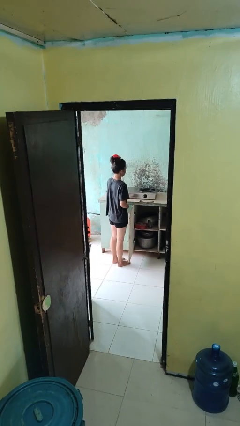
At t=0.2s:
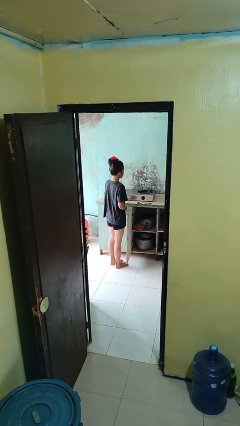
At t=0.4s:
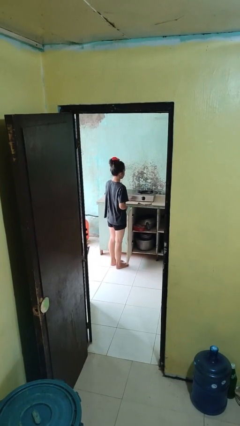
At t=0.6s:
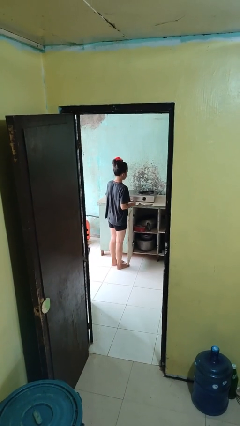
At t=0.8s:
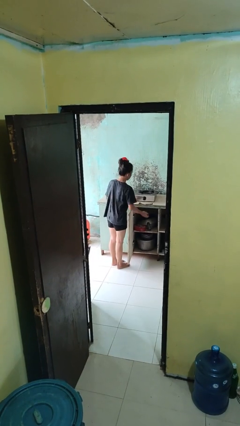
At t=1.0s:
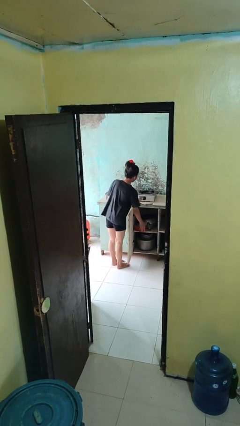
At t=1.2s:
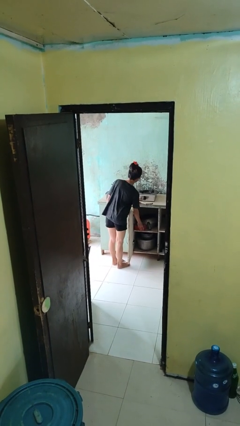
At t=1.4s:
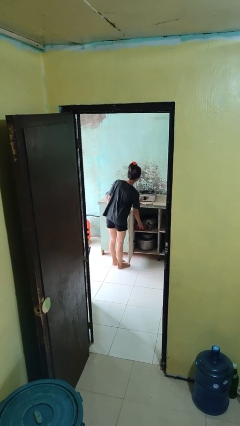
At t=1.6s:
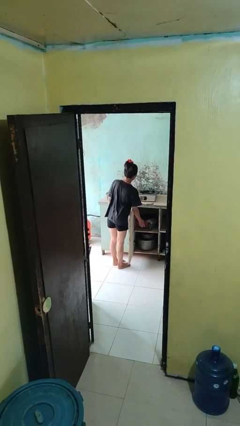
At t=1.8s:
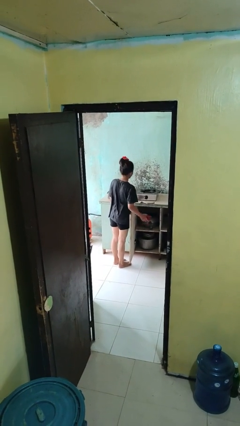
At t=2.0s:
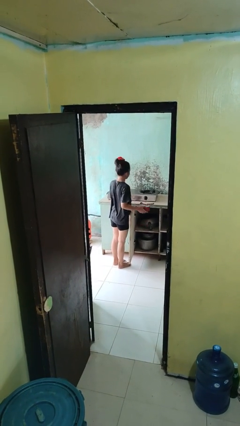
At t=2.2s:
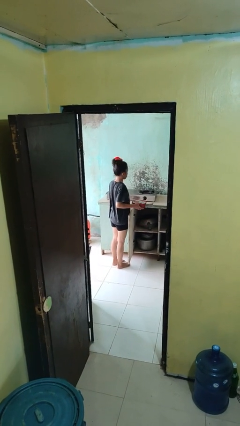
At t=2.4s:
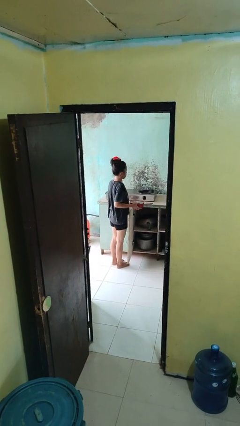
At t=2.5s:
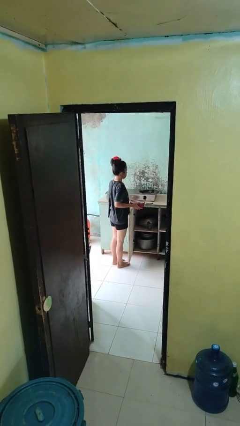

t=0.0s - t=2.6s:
person takes object from cabinet

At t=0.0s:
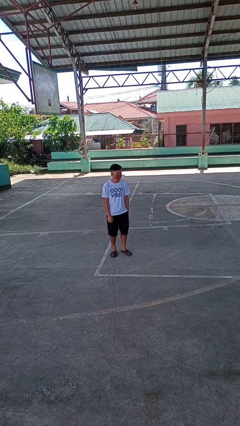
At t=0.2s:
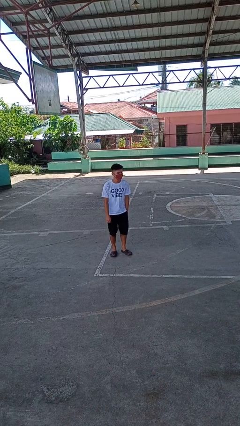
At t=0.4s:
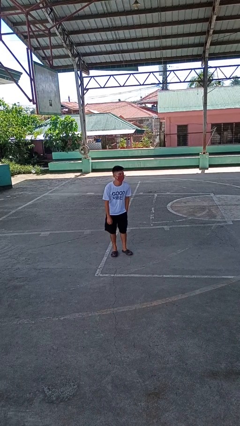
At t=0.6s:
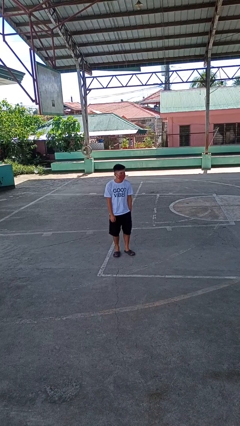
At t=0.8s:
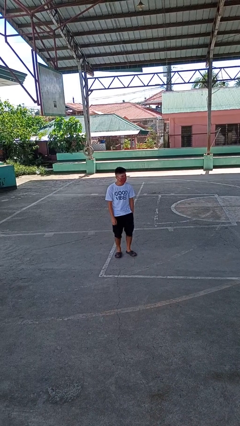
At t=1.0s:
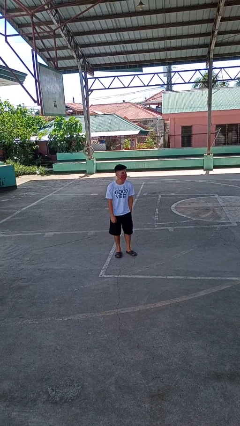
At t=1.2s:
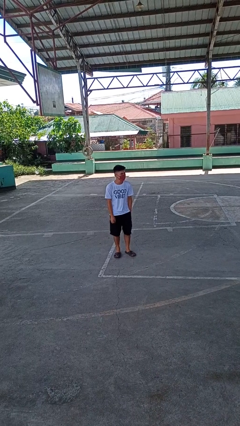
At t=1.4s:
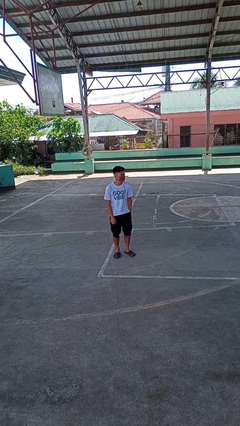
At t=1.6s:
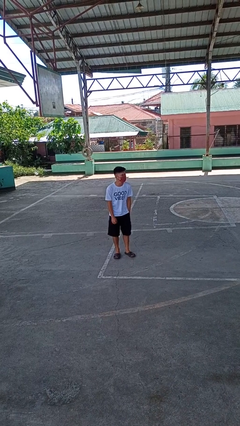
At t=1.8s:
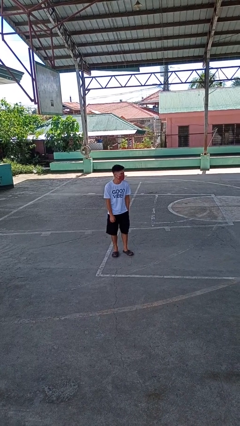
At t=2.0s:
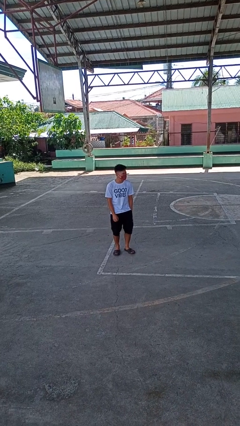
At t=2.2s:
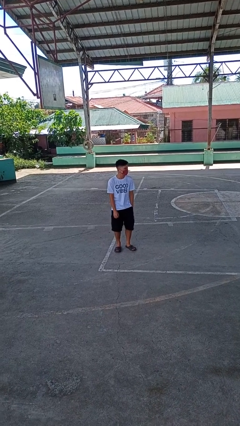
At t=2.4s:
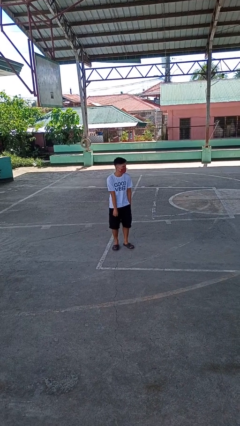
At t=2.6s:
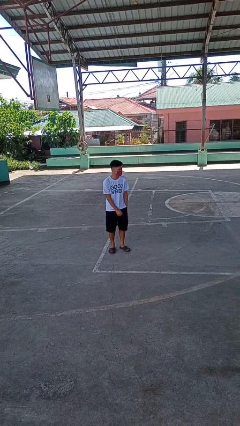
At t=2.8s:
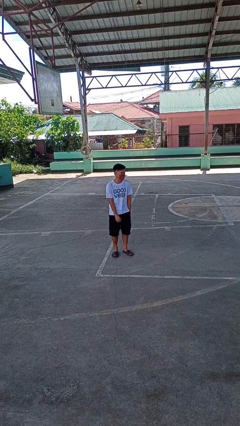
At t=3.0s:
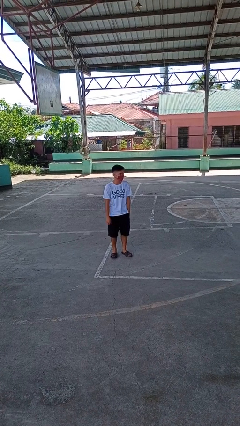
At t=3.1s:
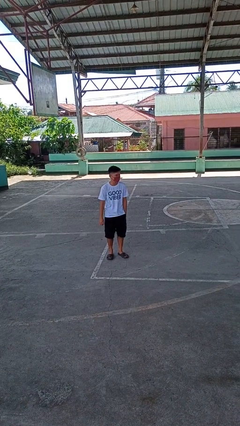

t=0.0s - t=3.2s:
person wiggles hips

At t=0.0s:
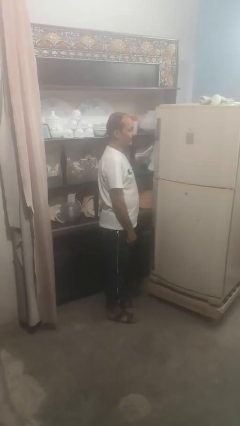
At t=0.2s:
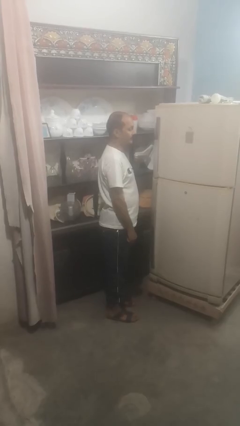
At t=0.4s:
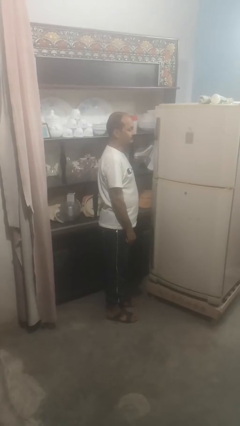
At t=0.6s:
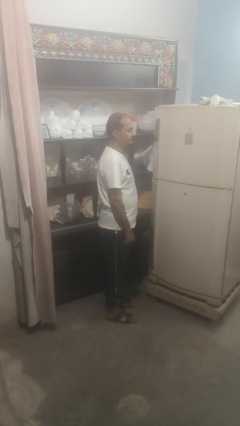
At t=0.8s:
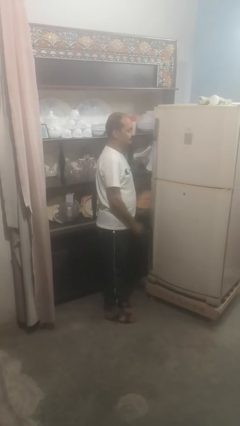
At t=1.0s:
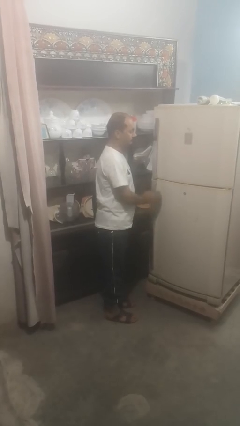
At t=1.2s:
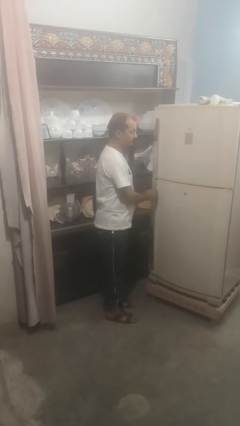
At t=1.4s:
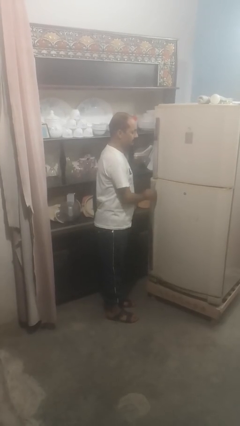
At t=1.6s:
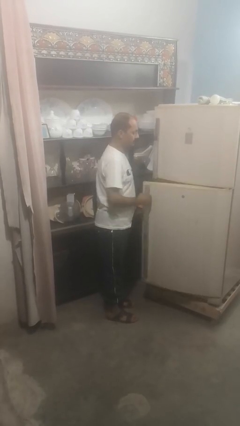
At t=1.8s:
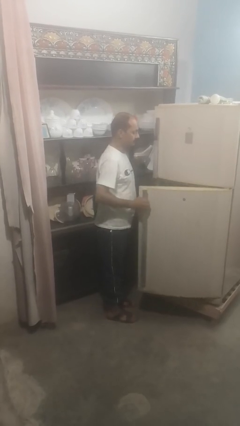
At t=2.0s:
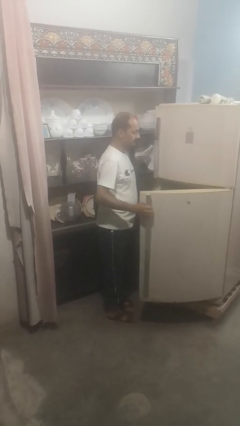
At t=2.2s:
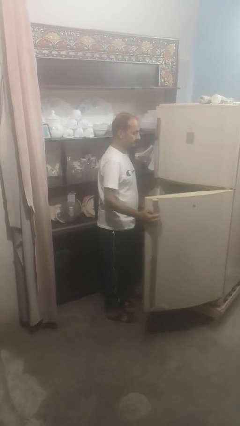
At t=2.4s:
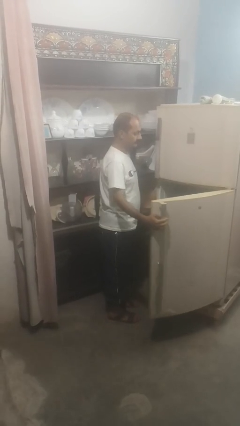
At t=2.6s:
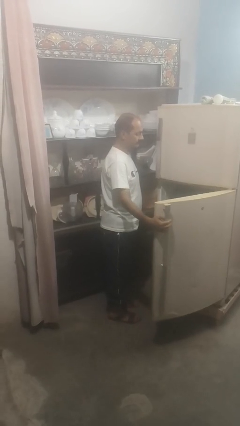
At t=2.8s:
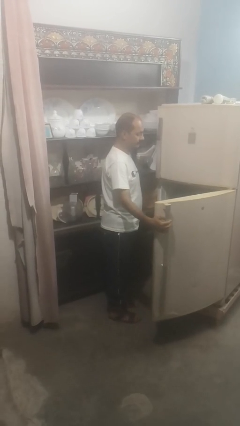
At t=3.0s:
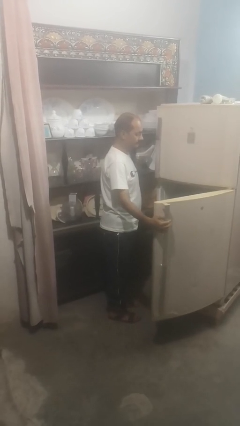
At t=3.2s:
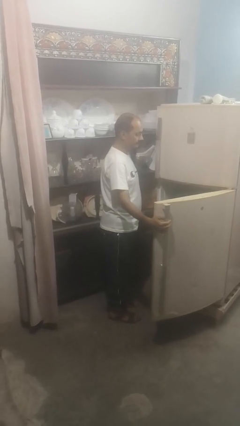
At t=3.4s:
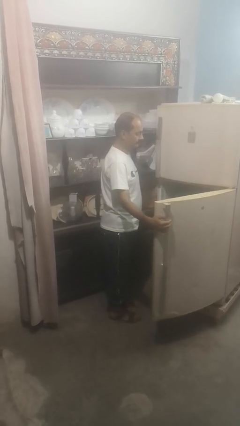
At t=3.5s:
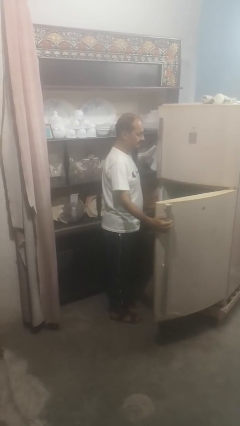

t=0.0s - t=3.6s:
person opens refrigerator

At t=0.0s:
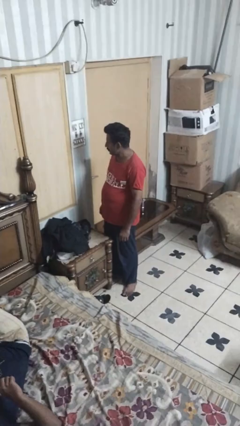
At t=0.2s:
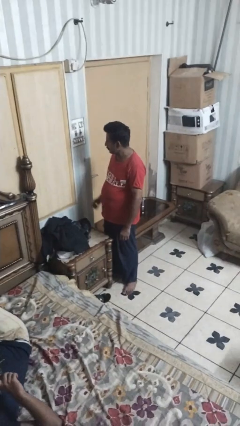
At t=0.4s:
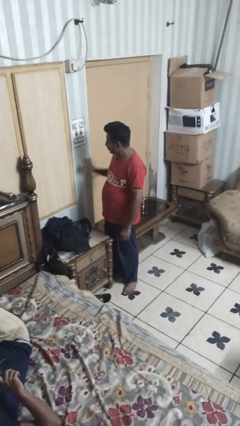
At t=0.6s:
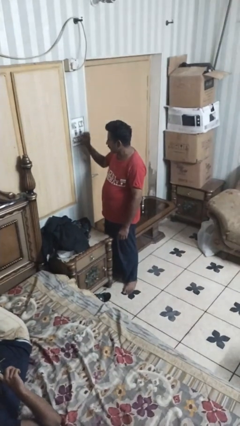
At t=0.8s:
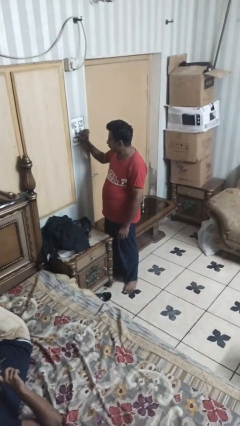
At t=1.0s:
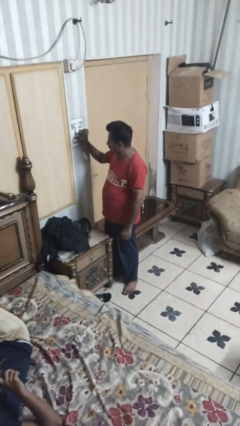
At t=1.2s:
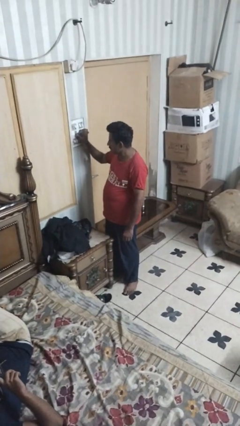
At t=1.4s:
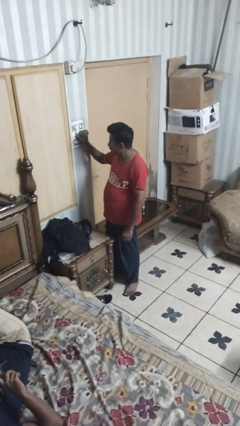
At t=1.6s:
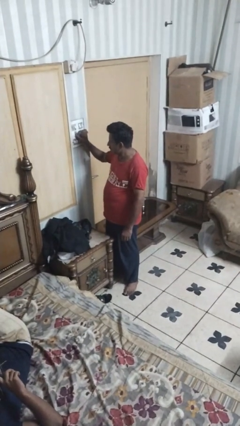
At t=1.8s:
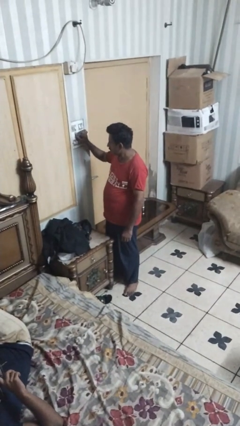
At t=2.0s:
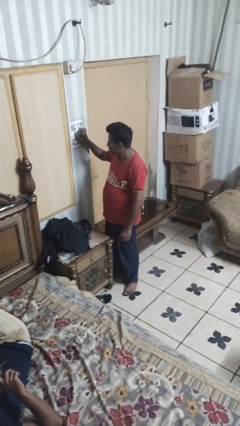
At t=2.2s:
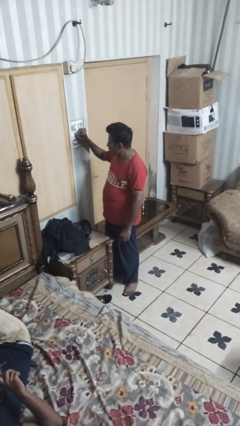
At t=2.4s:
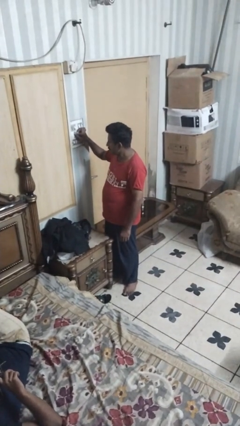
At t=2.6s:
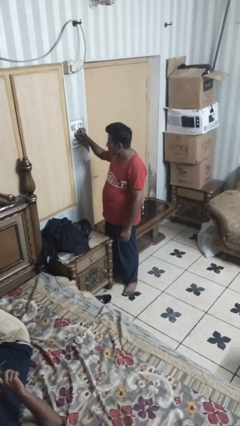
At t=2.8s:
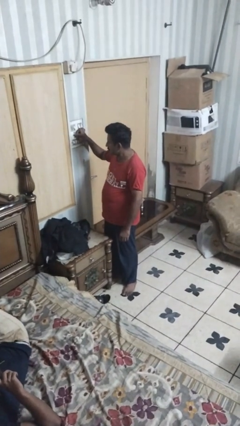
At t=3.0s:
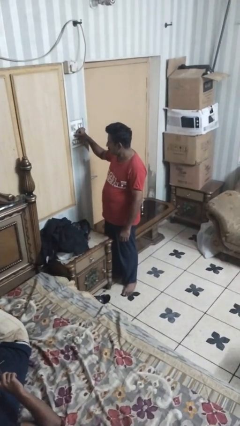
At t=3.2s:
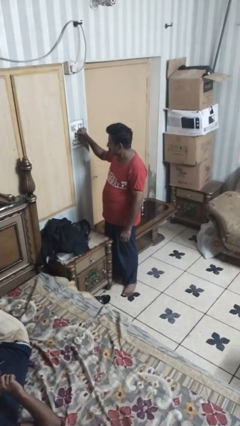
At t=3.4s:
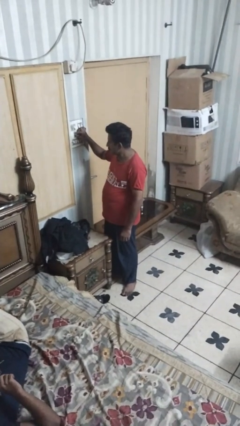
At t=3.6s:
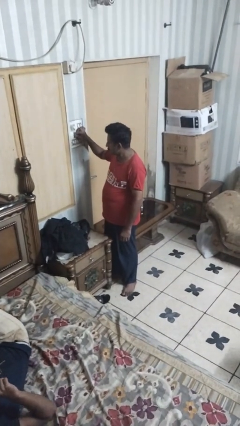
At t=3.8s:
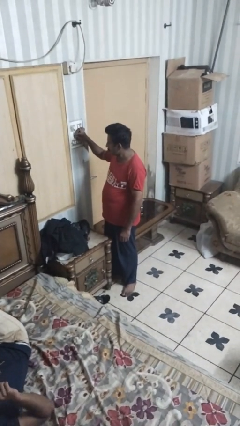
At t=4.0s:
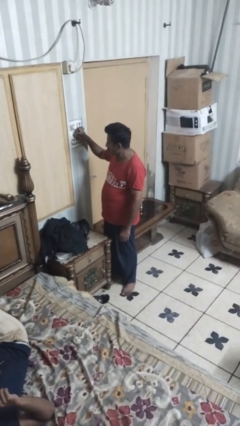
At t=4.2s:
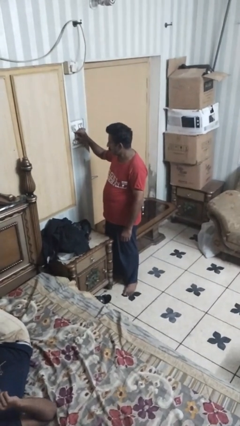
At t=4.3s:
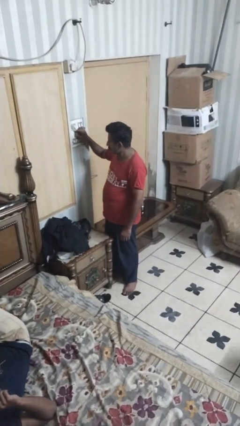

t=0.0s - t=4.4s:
person adjusts thermostat

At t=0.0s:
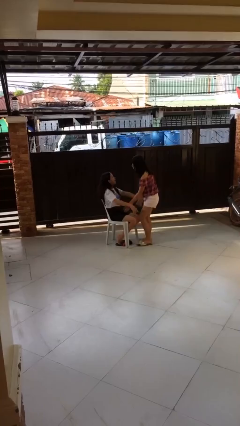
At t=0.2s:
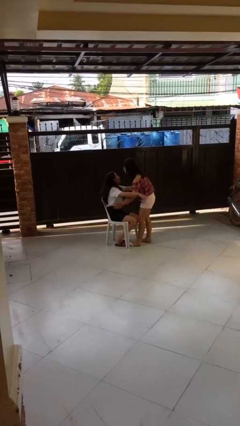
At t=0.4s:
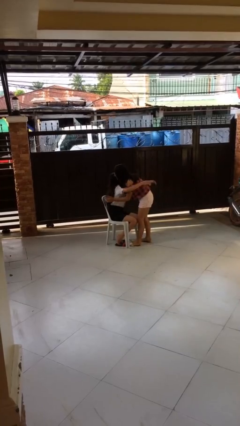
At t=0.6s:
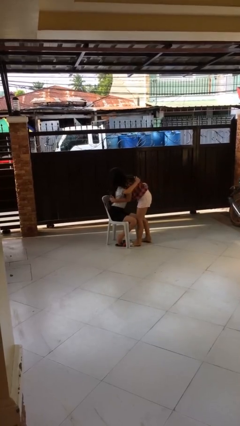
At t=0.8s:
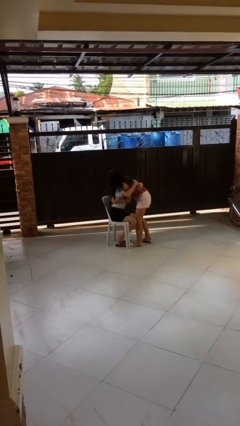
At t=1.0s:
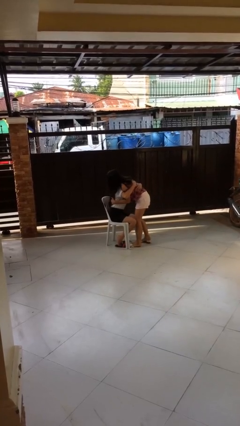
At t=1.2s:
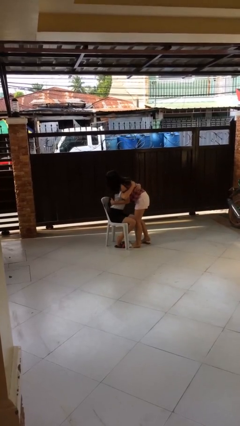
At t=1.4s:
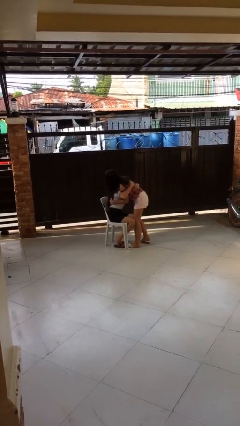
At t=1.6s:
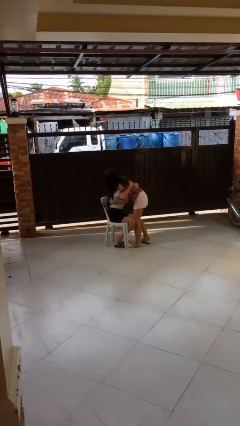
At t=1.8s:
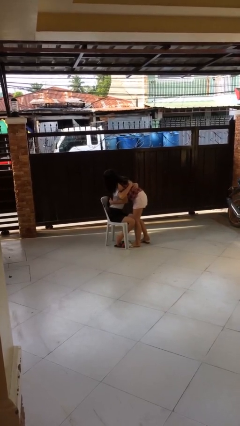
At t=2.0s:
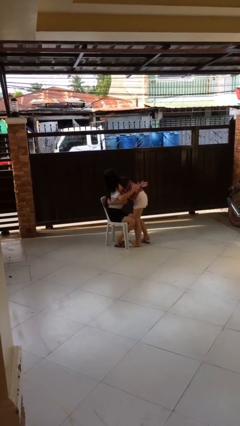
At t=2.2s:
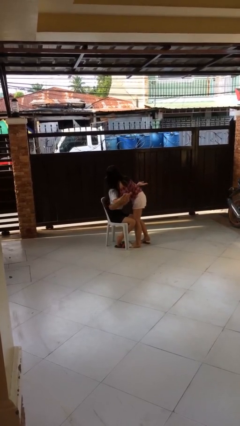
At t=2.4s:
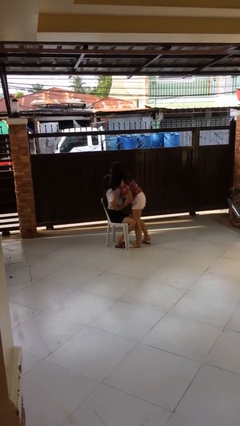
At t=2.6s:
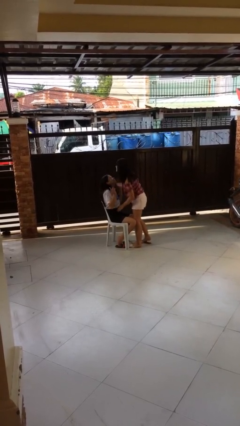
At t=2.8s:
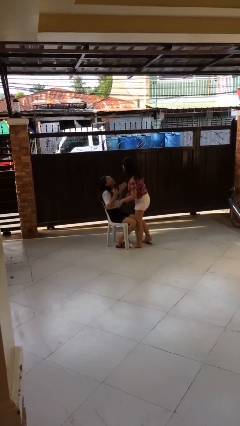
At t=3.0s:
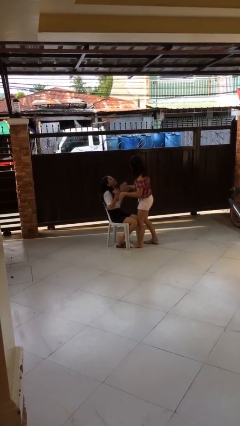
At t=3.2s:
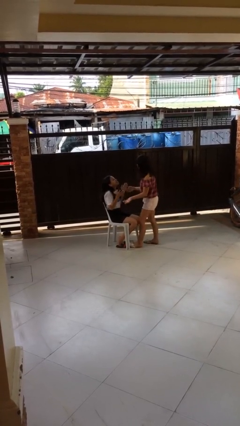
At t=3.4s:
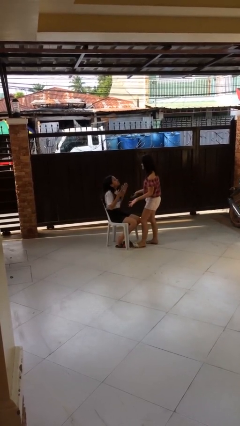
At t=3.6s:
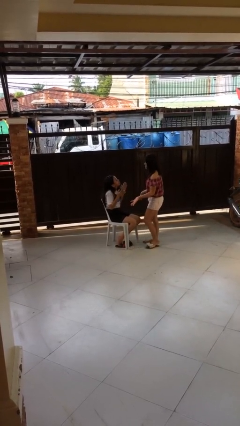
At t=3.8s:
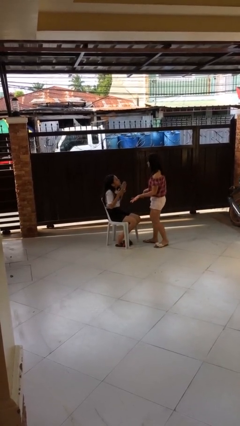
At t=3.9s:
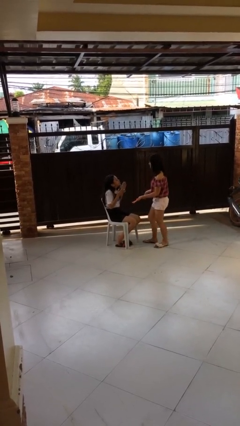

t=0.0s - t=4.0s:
person embraces person
